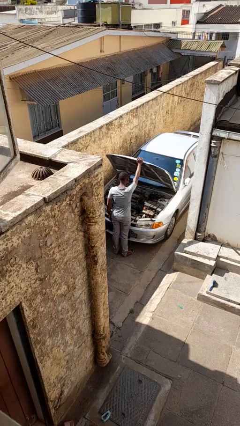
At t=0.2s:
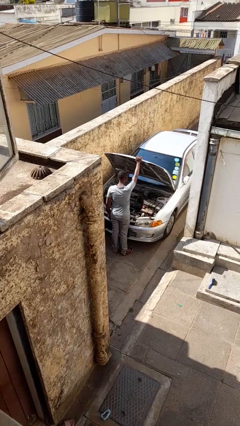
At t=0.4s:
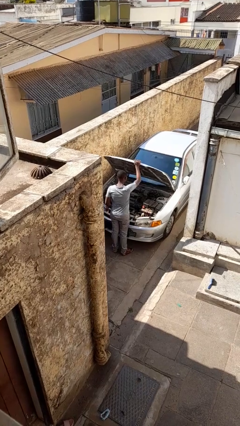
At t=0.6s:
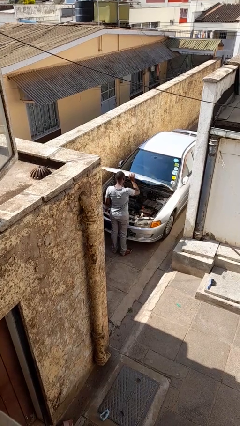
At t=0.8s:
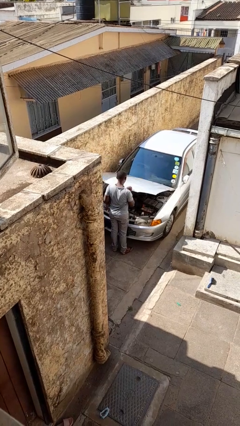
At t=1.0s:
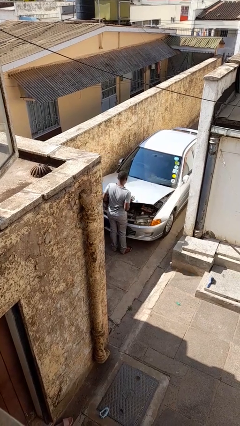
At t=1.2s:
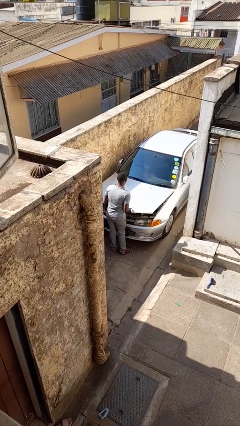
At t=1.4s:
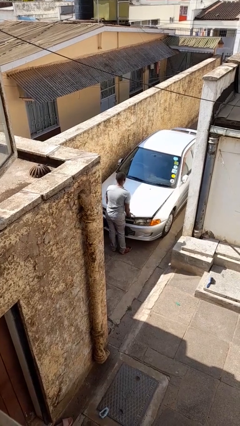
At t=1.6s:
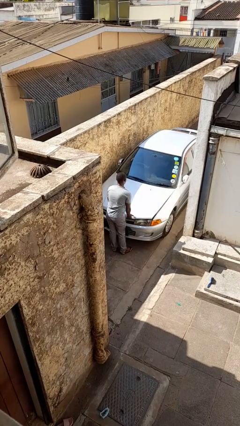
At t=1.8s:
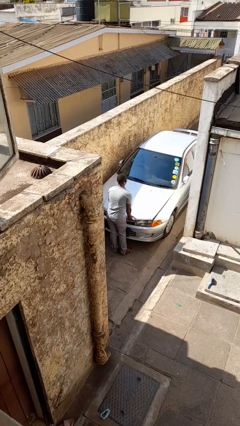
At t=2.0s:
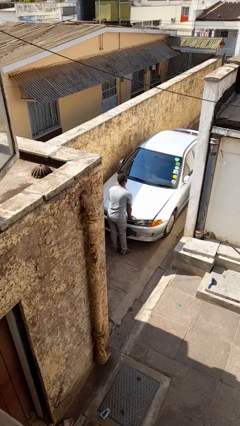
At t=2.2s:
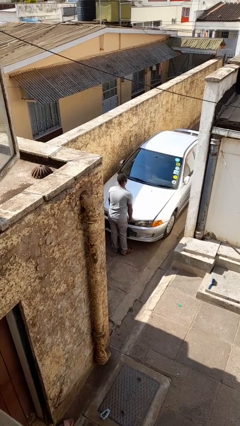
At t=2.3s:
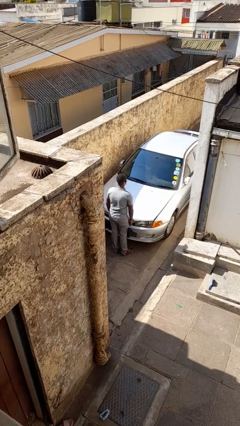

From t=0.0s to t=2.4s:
person closes car hood

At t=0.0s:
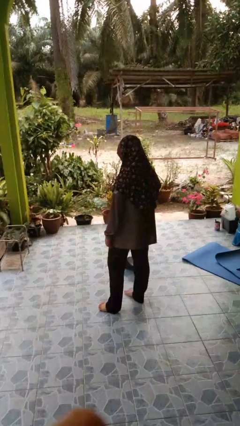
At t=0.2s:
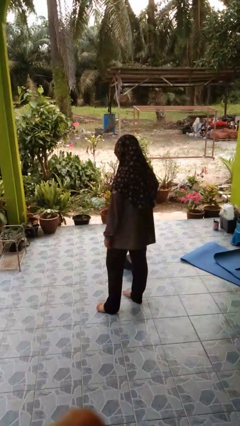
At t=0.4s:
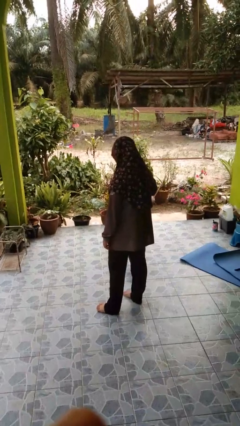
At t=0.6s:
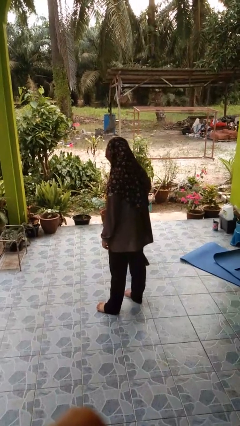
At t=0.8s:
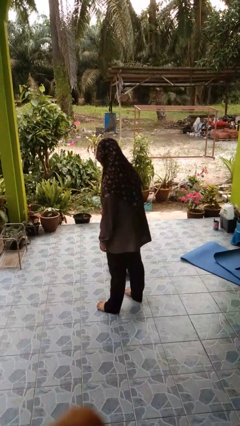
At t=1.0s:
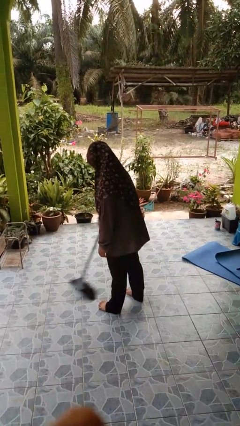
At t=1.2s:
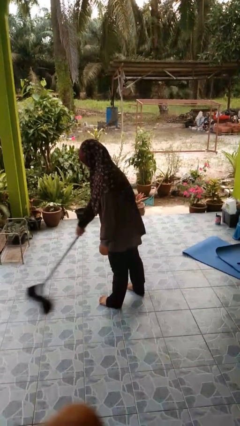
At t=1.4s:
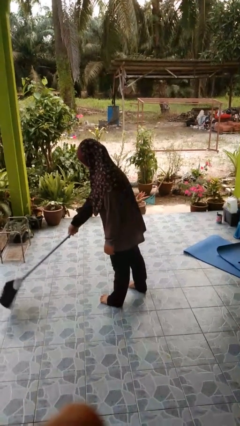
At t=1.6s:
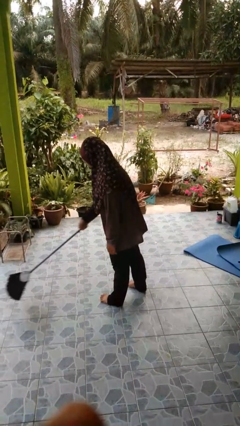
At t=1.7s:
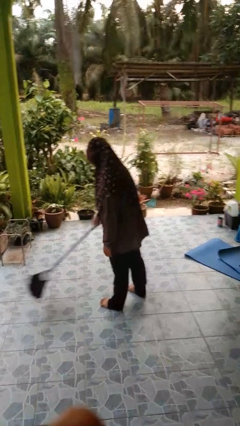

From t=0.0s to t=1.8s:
person sweeps floor

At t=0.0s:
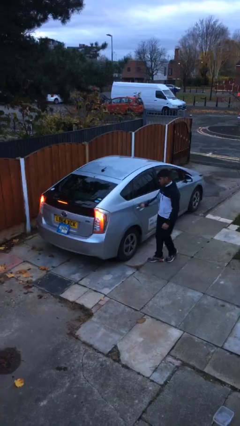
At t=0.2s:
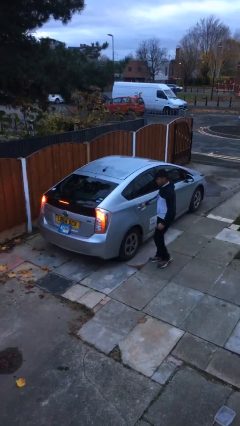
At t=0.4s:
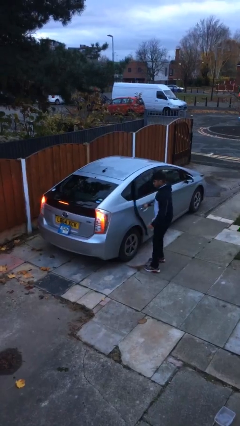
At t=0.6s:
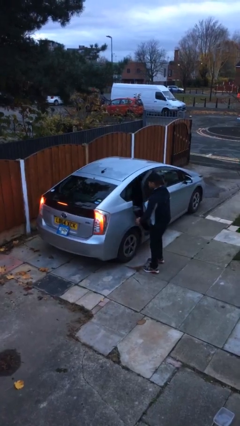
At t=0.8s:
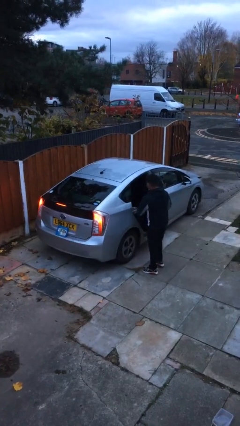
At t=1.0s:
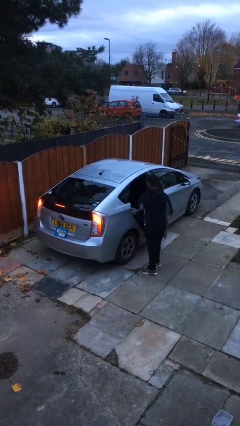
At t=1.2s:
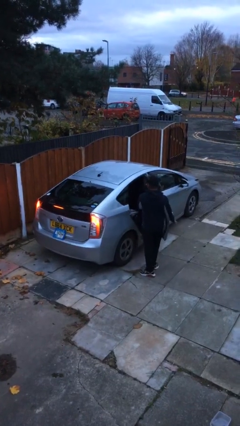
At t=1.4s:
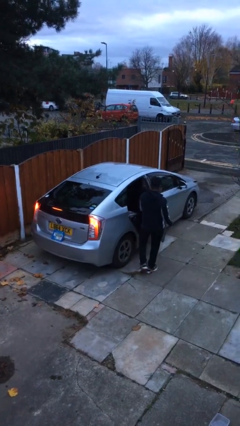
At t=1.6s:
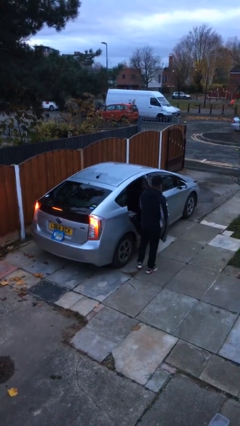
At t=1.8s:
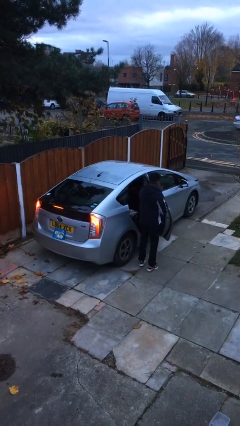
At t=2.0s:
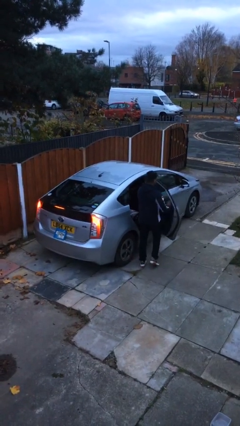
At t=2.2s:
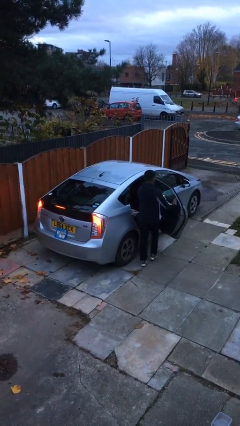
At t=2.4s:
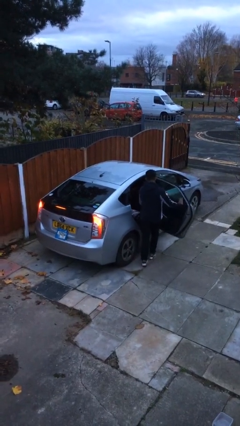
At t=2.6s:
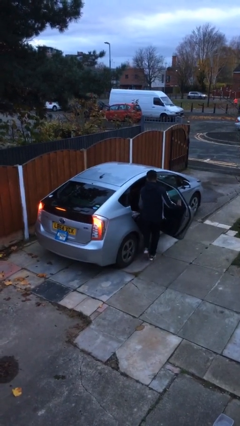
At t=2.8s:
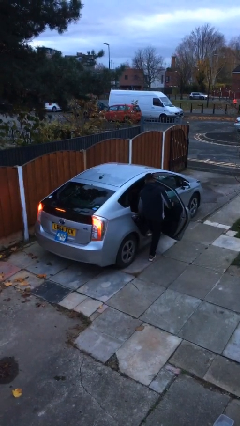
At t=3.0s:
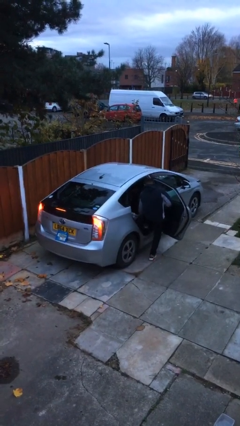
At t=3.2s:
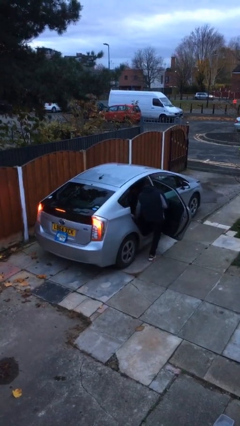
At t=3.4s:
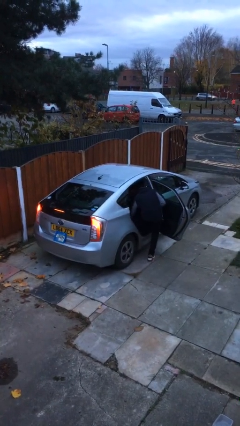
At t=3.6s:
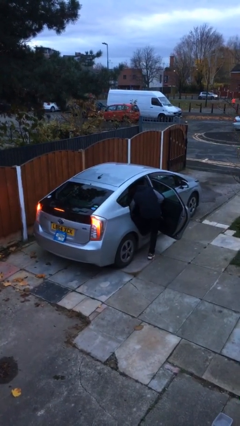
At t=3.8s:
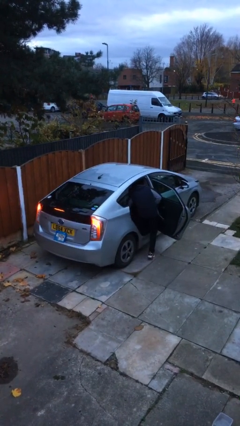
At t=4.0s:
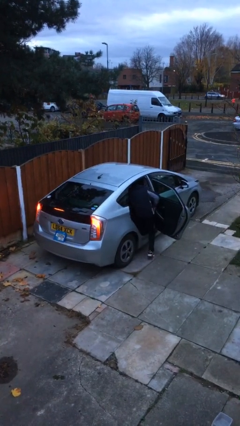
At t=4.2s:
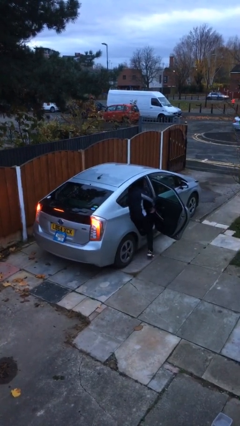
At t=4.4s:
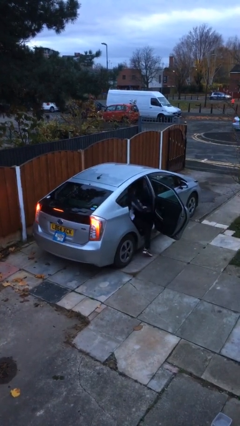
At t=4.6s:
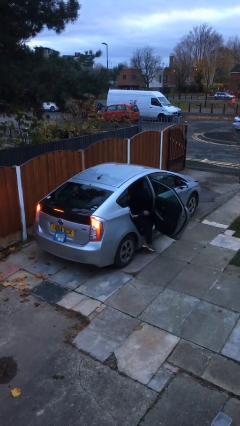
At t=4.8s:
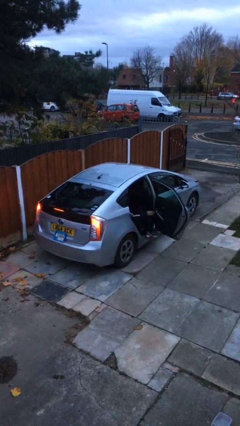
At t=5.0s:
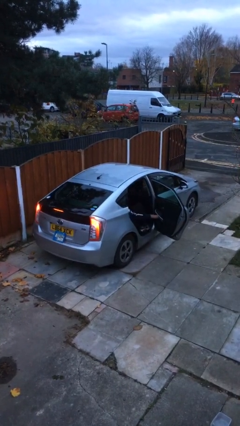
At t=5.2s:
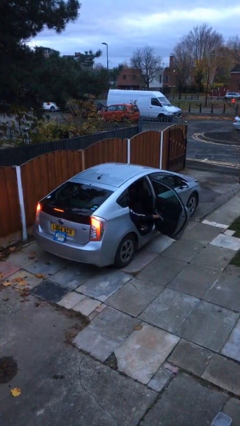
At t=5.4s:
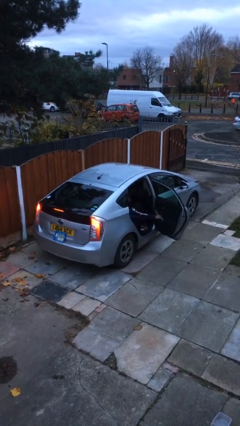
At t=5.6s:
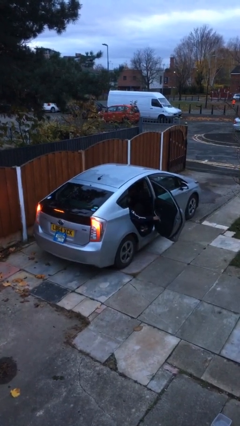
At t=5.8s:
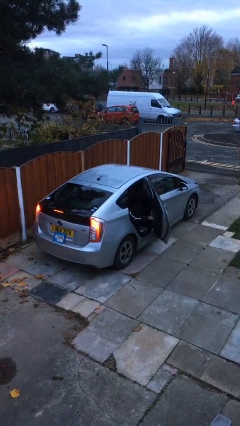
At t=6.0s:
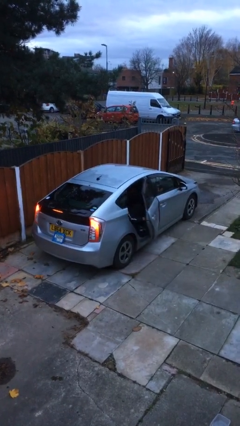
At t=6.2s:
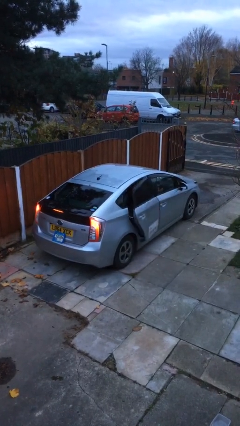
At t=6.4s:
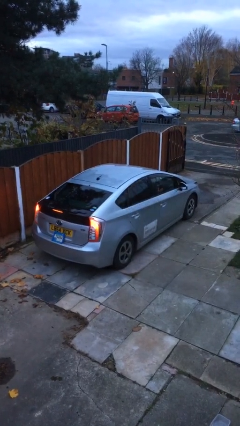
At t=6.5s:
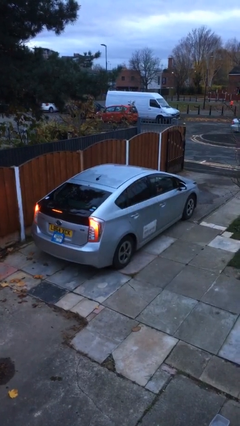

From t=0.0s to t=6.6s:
car picks up person

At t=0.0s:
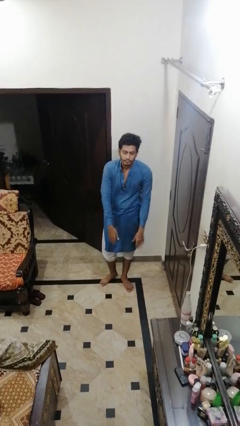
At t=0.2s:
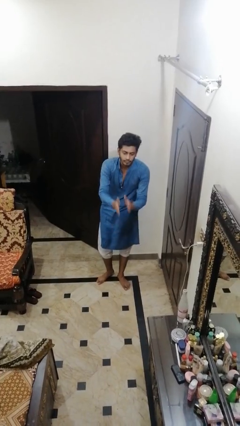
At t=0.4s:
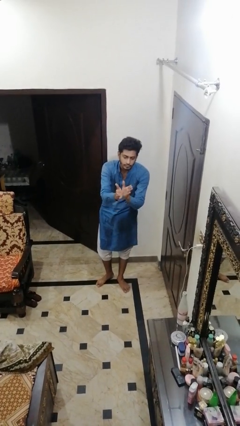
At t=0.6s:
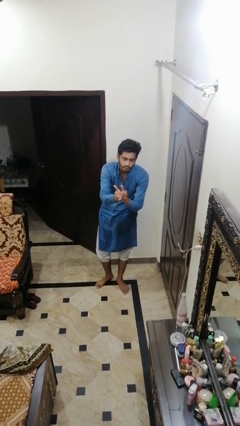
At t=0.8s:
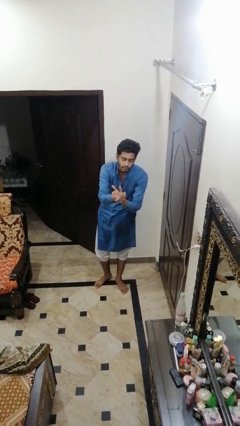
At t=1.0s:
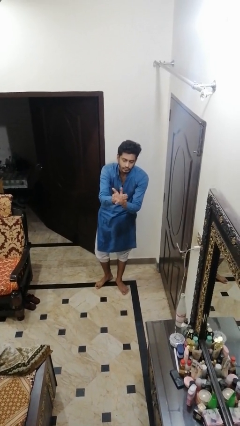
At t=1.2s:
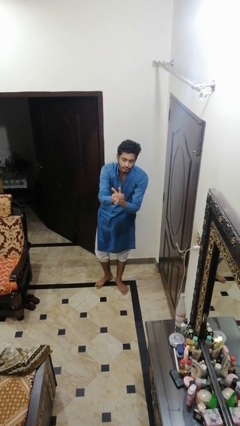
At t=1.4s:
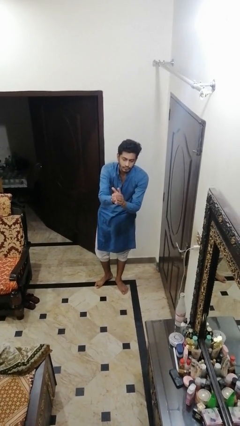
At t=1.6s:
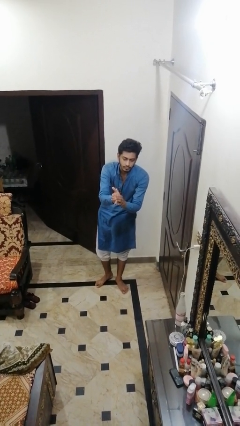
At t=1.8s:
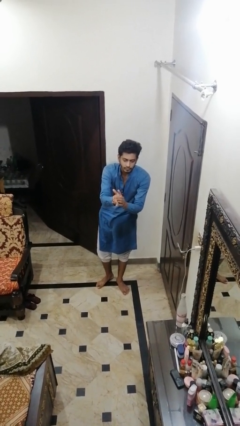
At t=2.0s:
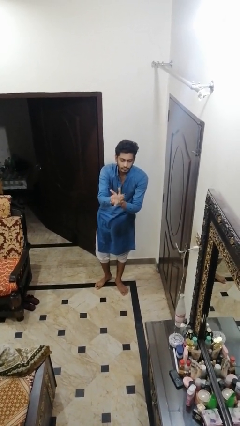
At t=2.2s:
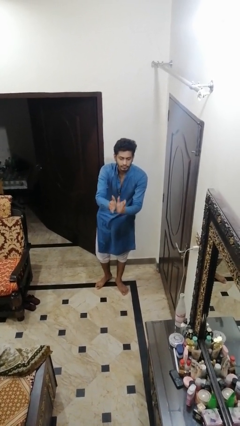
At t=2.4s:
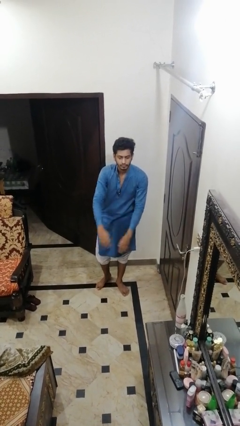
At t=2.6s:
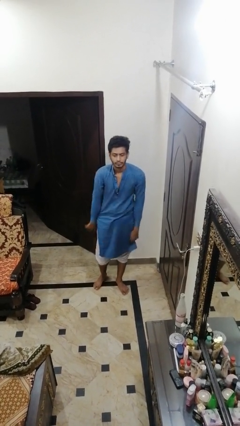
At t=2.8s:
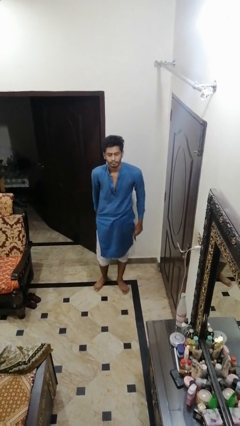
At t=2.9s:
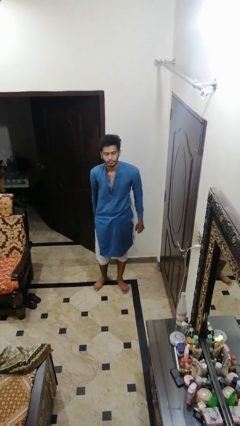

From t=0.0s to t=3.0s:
person claps hands

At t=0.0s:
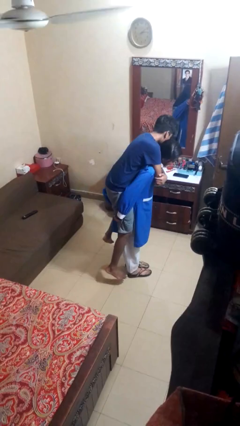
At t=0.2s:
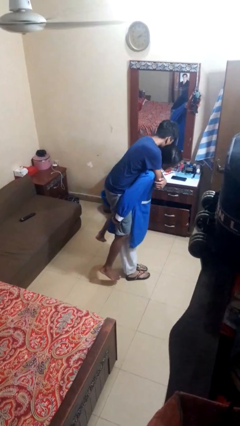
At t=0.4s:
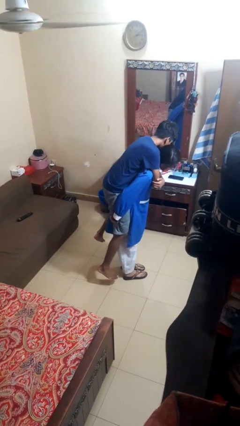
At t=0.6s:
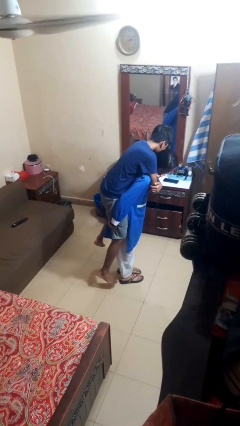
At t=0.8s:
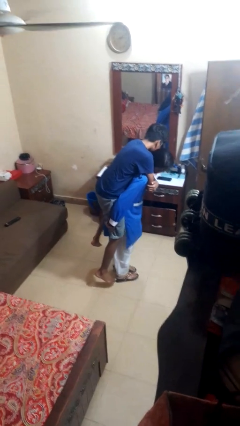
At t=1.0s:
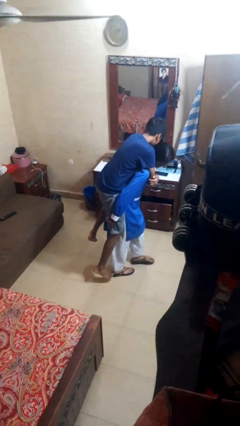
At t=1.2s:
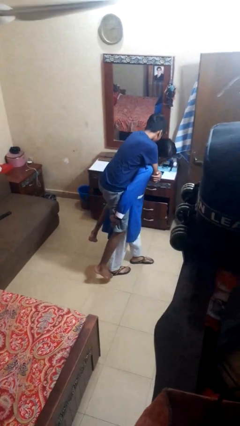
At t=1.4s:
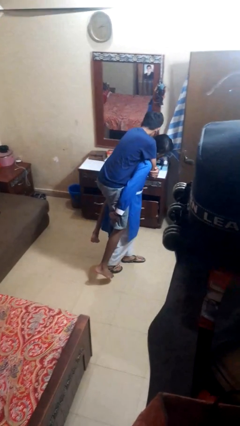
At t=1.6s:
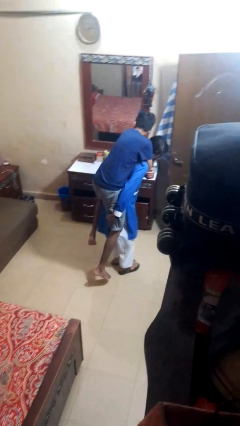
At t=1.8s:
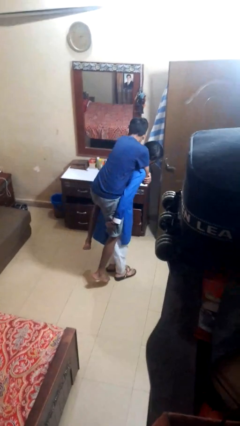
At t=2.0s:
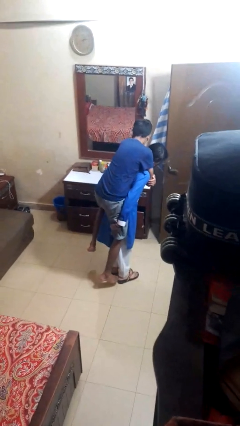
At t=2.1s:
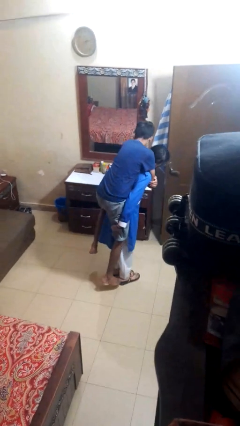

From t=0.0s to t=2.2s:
person carries person on back

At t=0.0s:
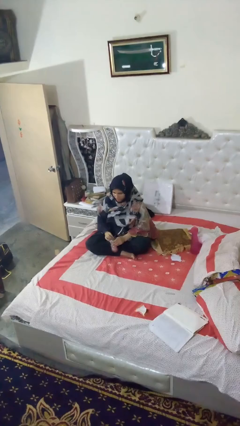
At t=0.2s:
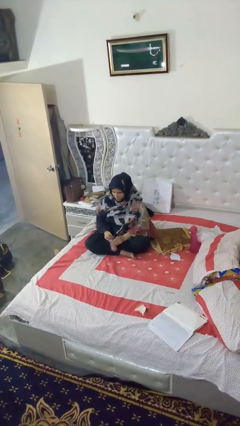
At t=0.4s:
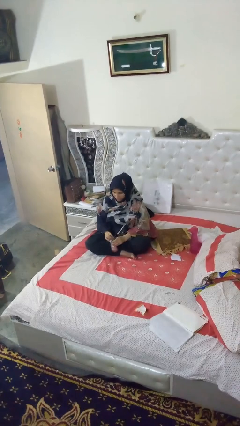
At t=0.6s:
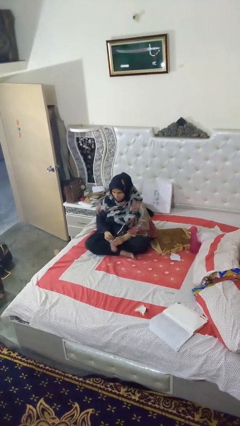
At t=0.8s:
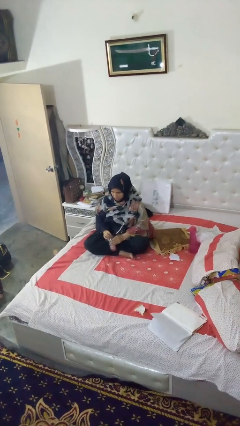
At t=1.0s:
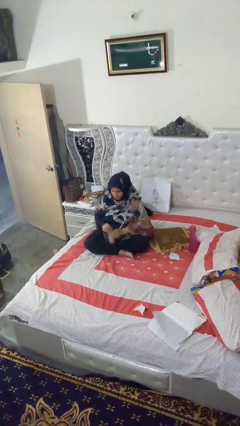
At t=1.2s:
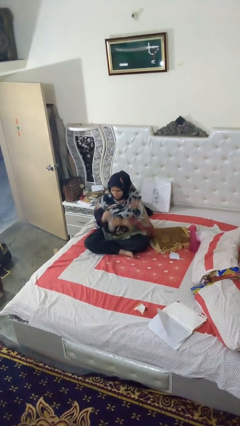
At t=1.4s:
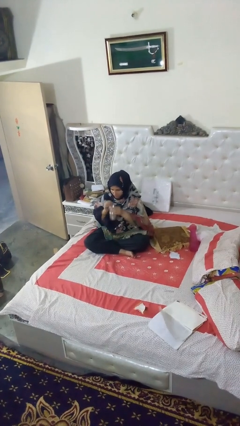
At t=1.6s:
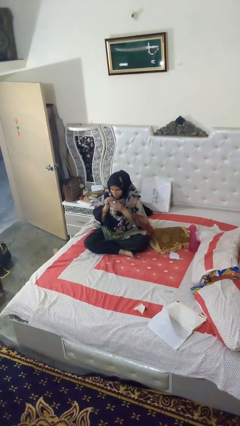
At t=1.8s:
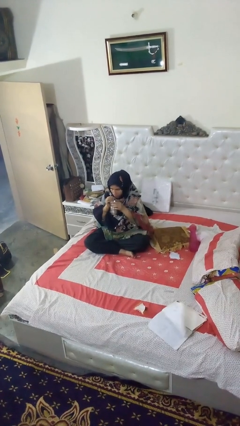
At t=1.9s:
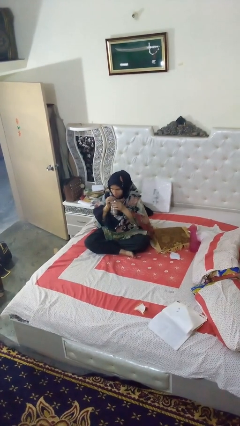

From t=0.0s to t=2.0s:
person drinks from straw
